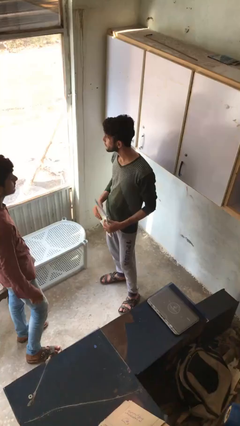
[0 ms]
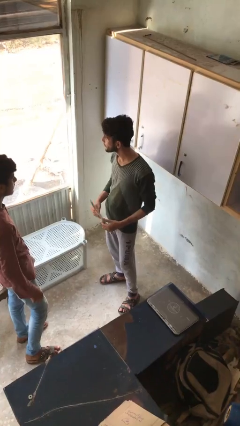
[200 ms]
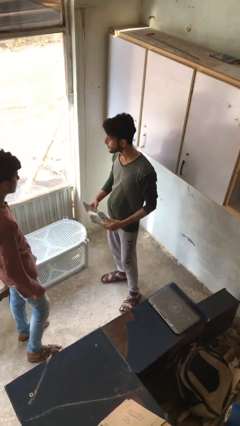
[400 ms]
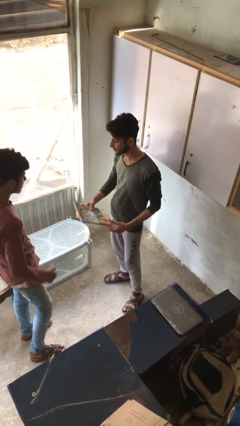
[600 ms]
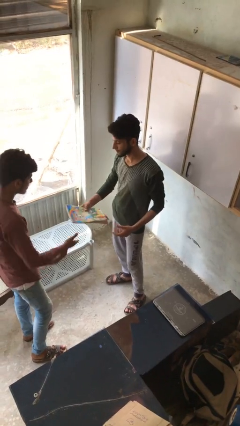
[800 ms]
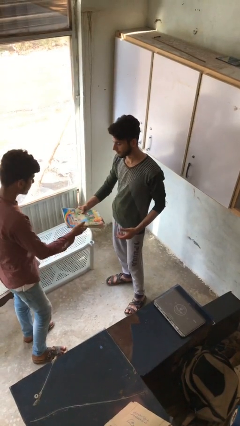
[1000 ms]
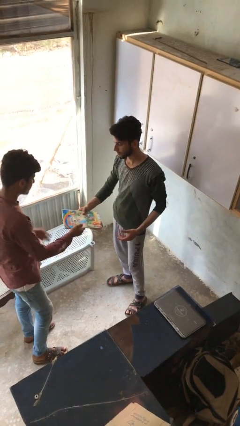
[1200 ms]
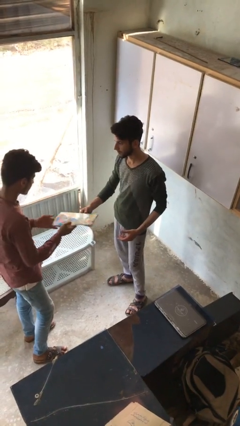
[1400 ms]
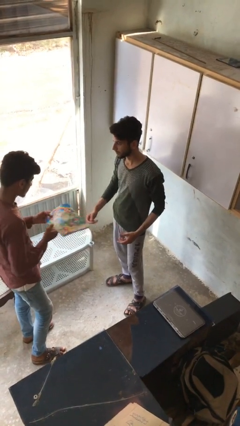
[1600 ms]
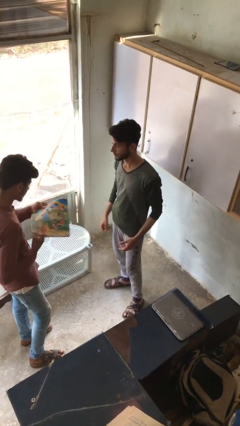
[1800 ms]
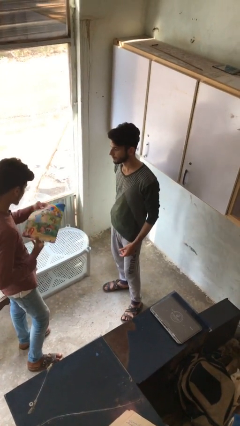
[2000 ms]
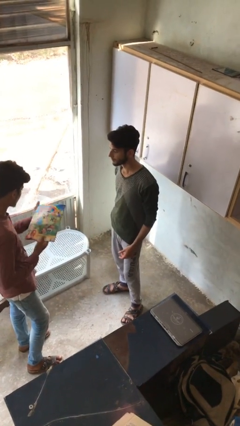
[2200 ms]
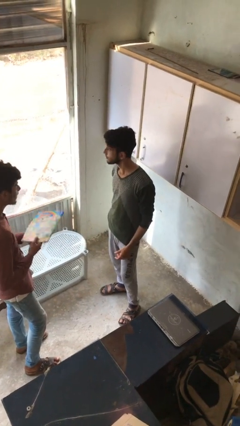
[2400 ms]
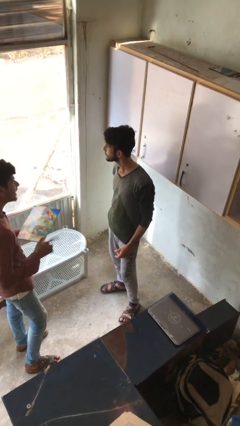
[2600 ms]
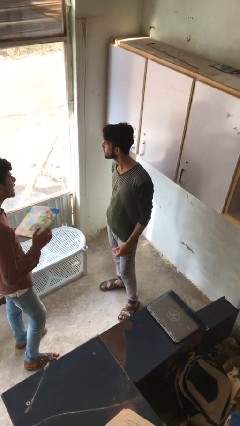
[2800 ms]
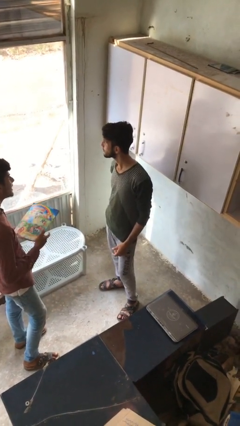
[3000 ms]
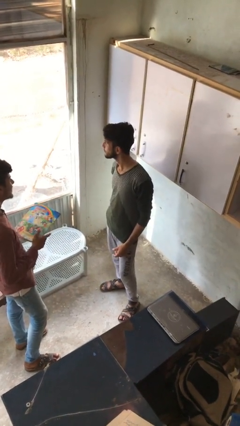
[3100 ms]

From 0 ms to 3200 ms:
person transfers object to person

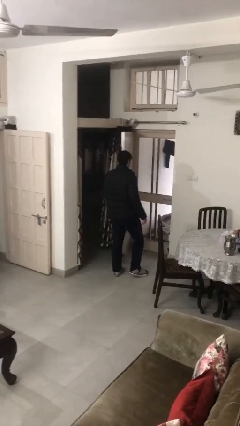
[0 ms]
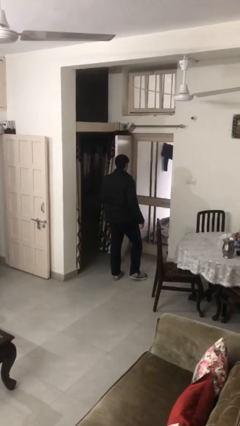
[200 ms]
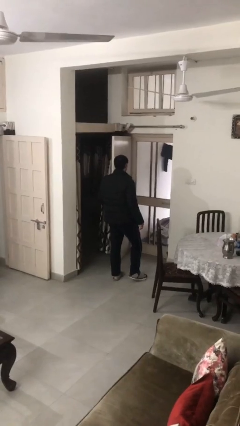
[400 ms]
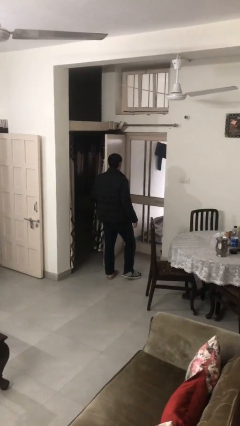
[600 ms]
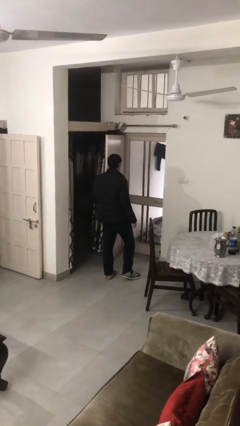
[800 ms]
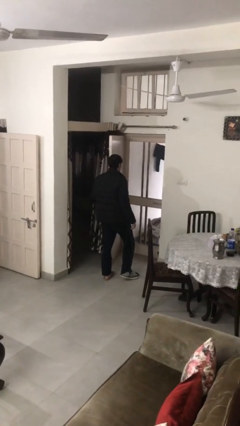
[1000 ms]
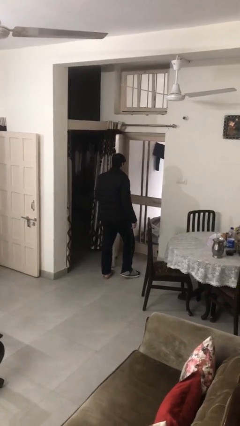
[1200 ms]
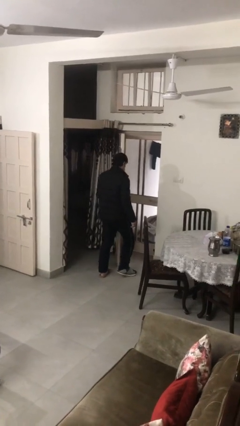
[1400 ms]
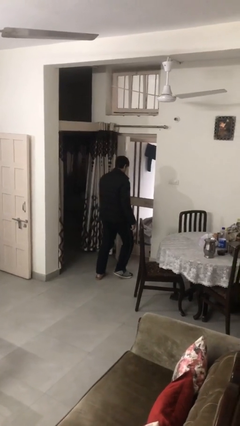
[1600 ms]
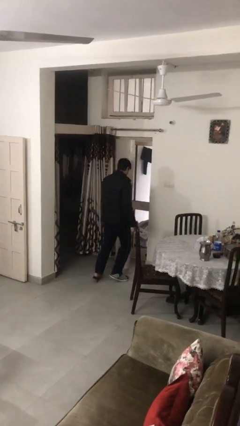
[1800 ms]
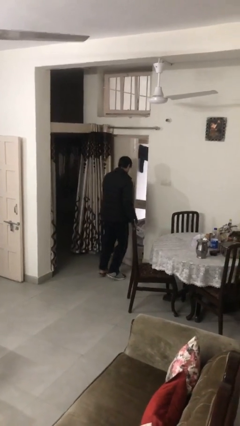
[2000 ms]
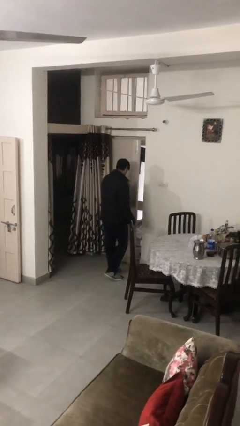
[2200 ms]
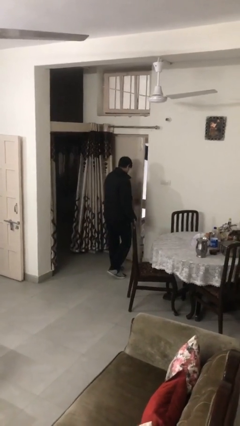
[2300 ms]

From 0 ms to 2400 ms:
person closes facility door

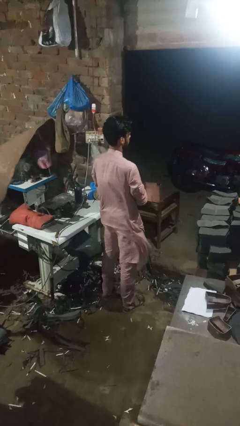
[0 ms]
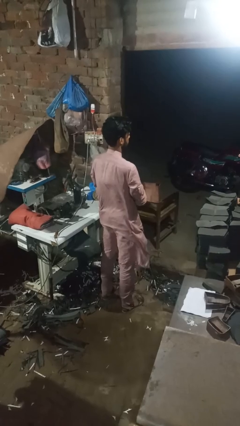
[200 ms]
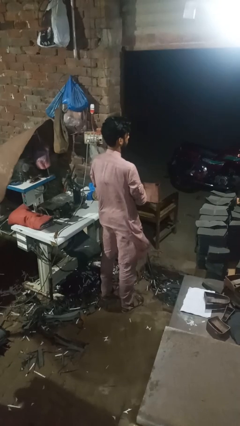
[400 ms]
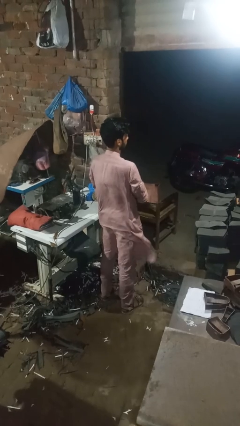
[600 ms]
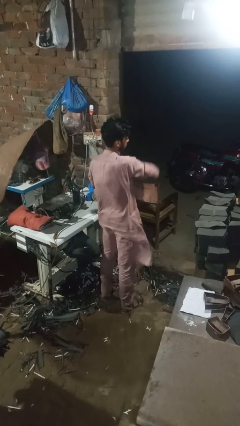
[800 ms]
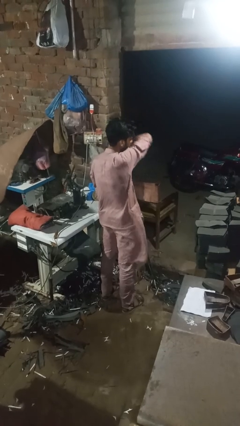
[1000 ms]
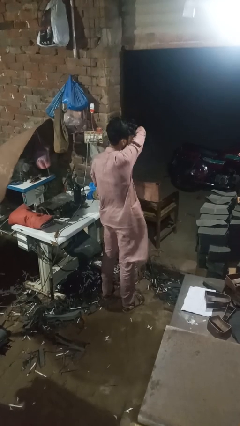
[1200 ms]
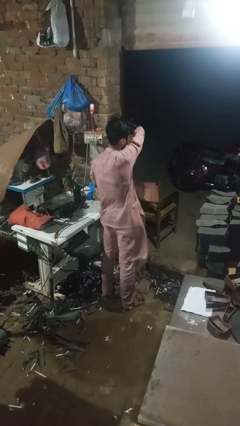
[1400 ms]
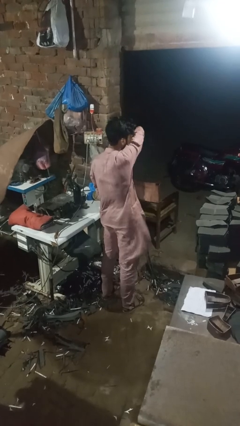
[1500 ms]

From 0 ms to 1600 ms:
person sneezes into arm

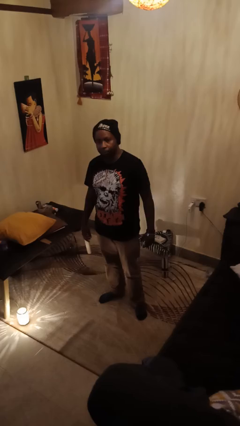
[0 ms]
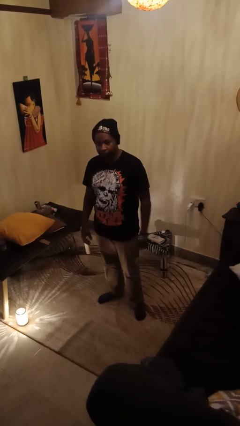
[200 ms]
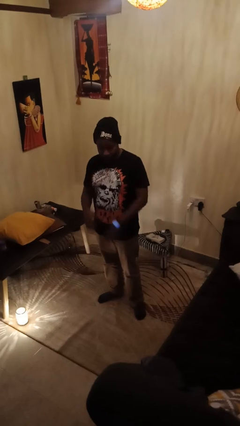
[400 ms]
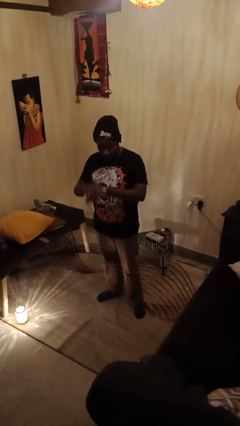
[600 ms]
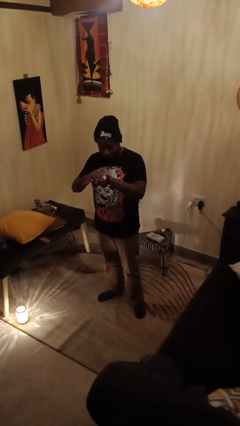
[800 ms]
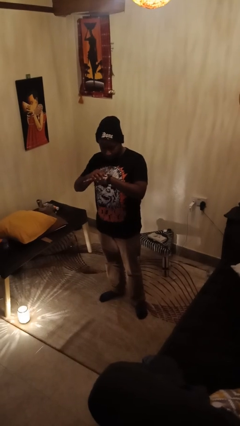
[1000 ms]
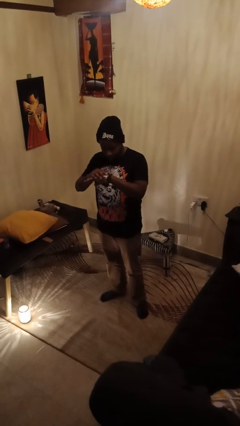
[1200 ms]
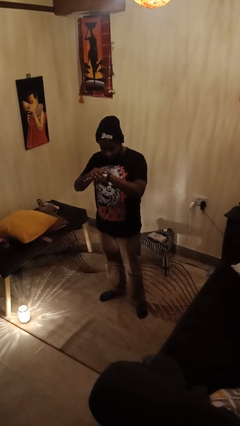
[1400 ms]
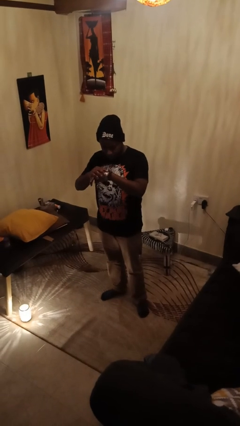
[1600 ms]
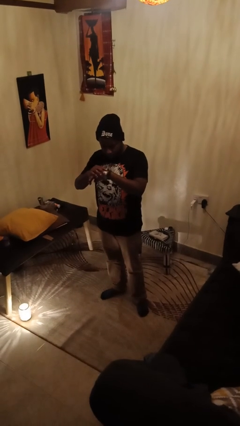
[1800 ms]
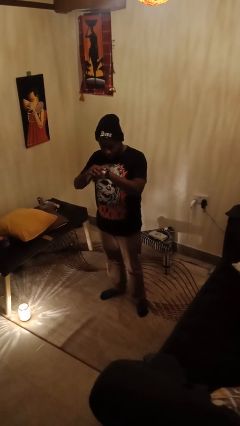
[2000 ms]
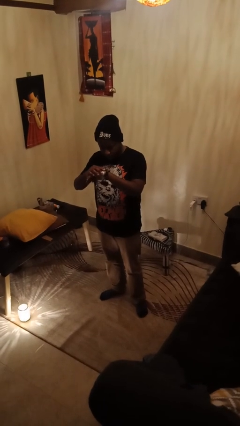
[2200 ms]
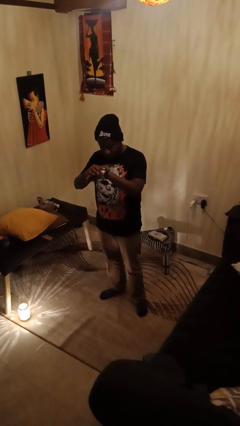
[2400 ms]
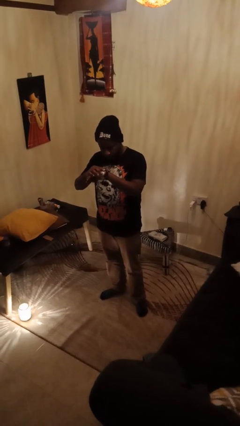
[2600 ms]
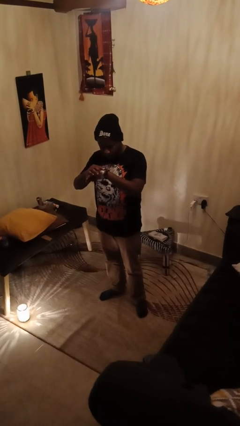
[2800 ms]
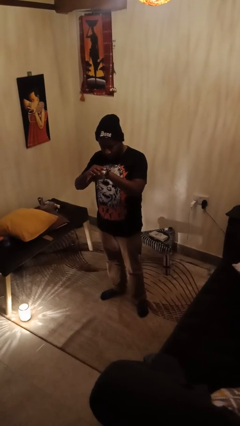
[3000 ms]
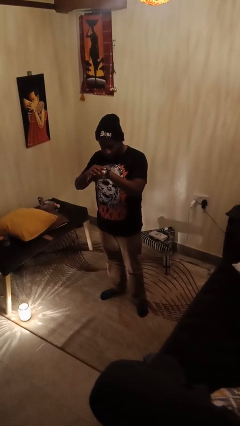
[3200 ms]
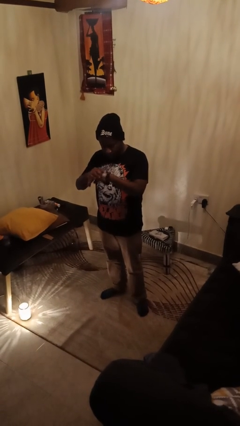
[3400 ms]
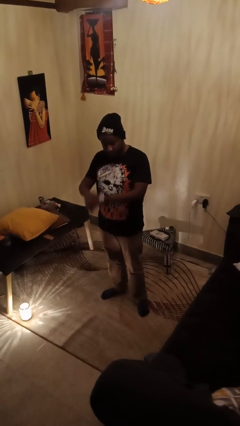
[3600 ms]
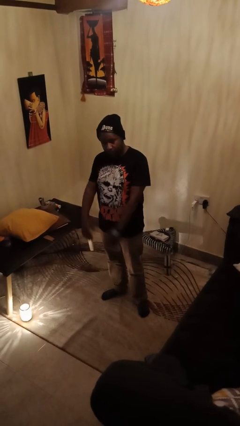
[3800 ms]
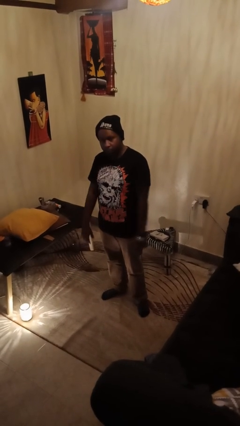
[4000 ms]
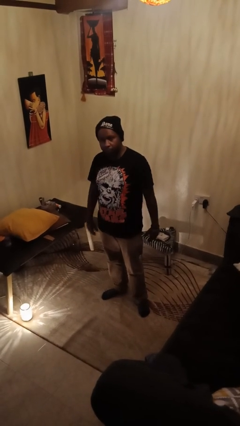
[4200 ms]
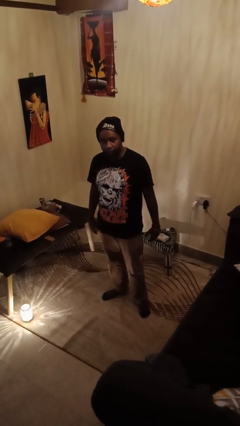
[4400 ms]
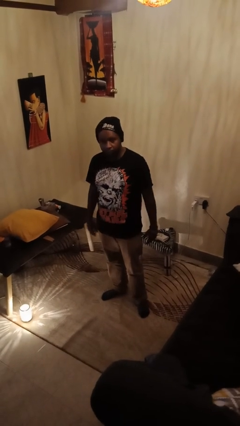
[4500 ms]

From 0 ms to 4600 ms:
person looks at wristwatch

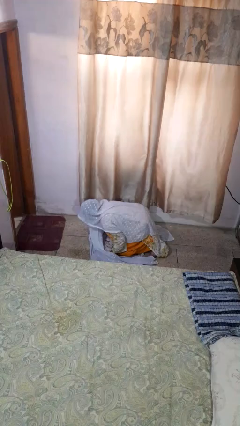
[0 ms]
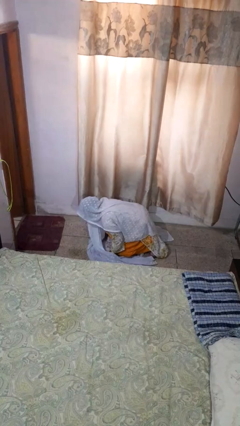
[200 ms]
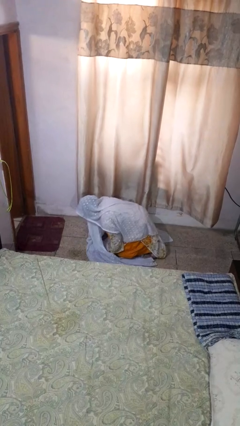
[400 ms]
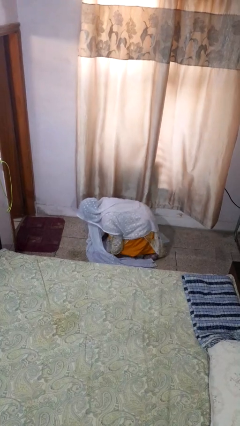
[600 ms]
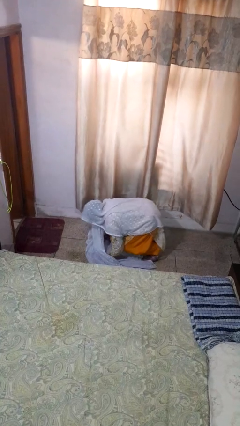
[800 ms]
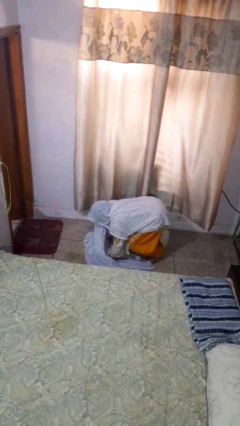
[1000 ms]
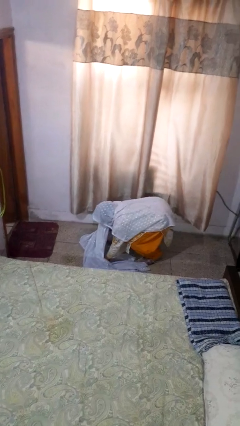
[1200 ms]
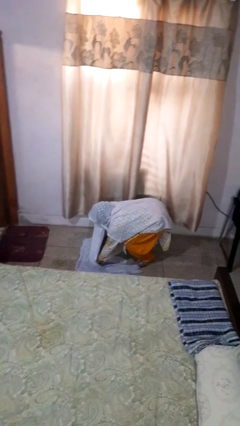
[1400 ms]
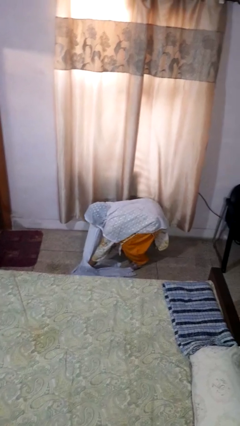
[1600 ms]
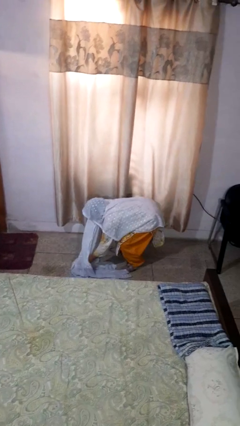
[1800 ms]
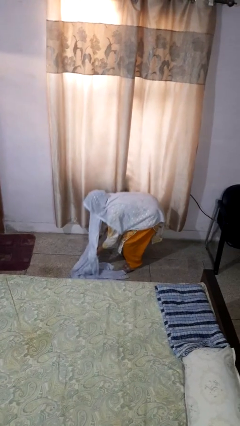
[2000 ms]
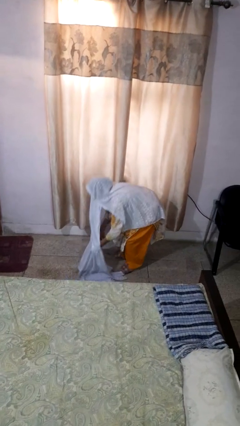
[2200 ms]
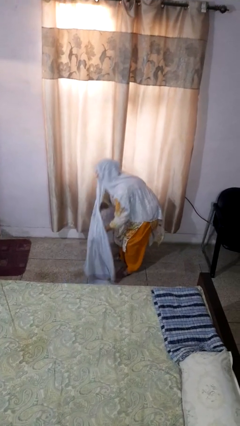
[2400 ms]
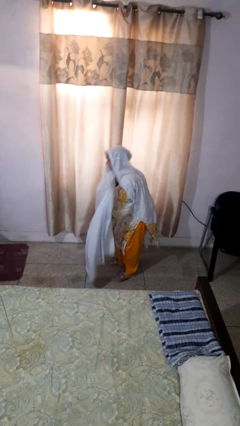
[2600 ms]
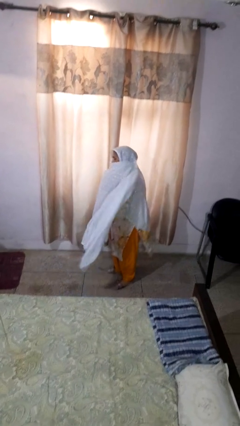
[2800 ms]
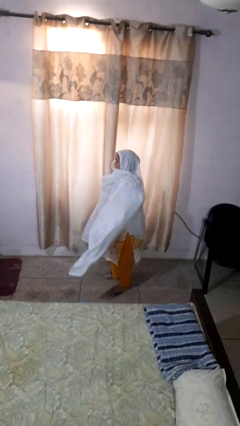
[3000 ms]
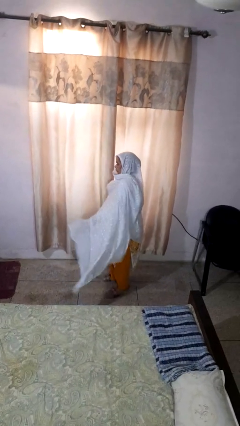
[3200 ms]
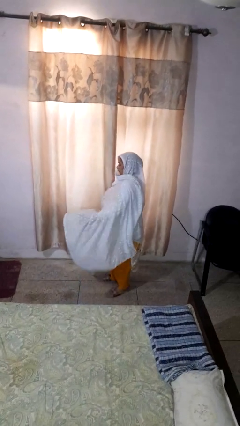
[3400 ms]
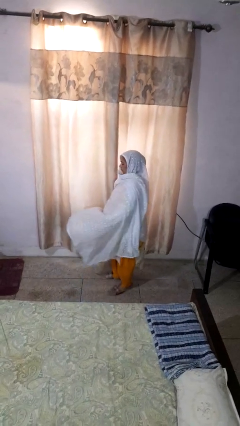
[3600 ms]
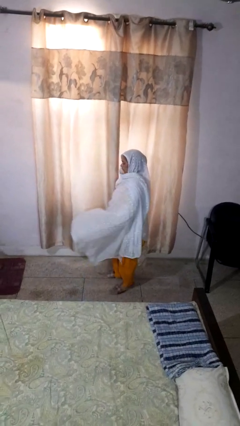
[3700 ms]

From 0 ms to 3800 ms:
person stands up from floor

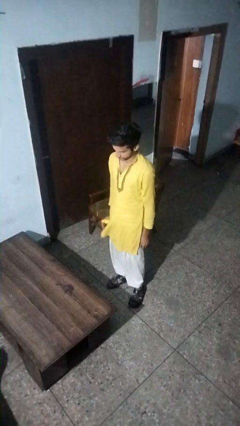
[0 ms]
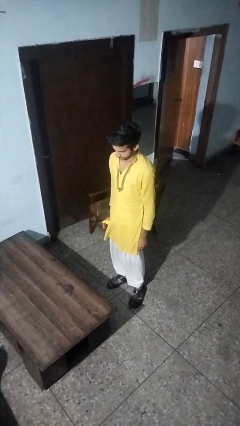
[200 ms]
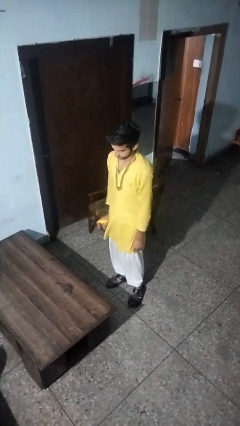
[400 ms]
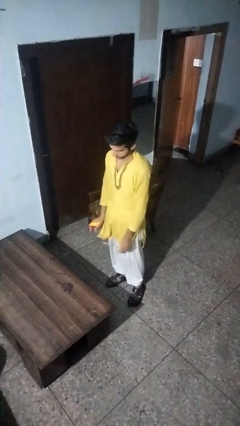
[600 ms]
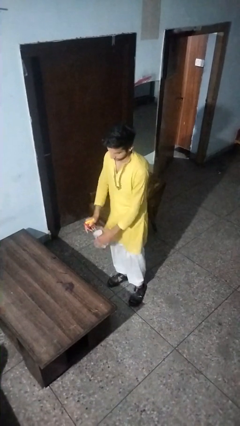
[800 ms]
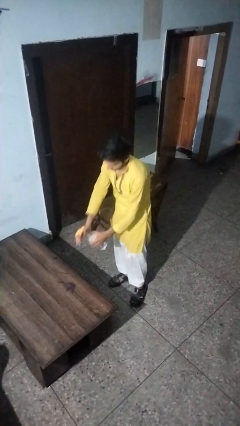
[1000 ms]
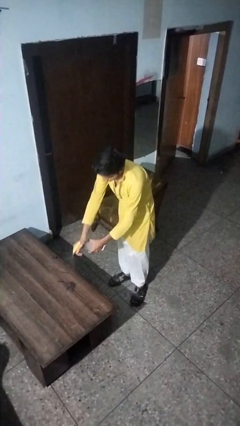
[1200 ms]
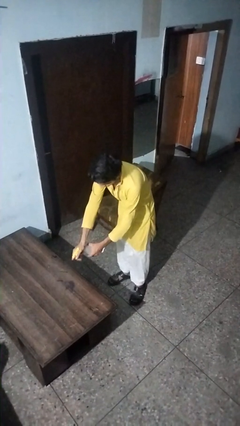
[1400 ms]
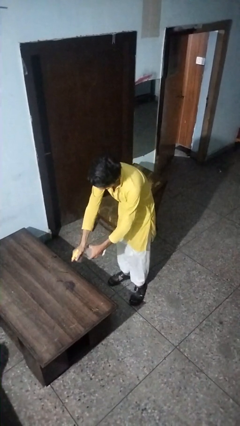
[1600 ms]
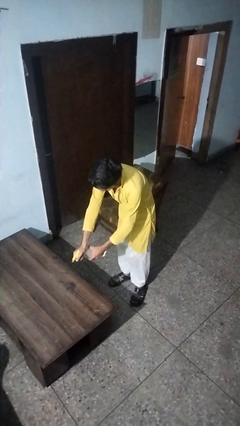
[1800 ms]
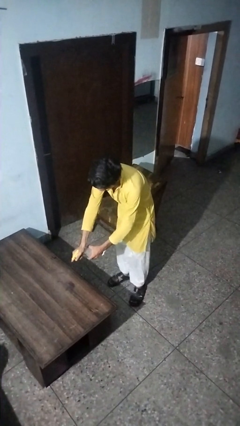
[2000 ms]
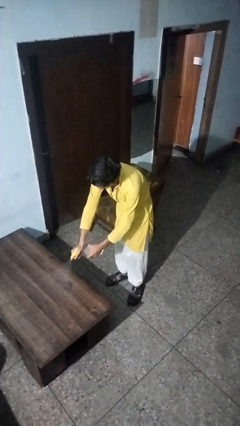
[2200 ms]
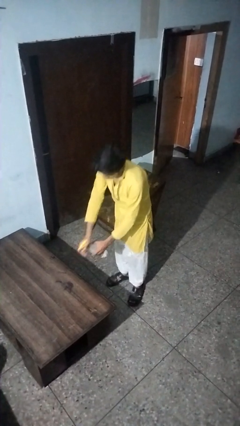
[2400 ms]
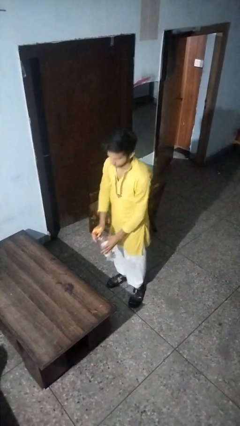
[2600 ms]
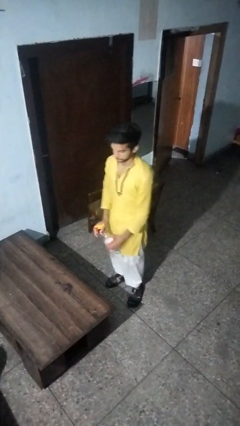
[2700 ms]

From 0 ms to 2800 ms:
person sprays from bottle
